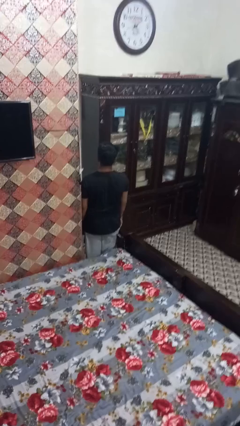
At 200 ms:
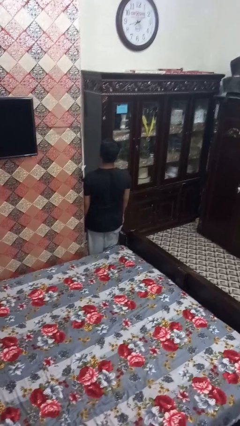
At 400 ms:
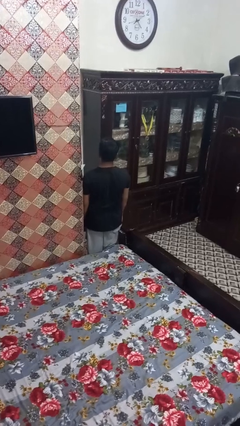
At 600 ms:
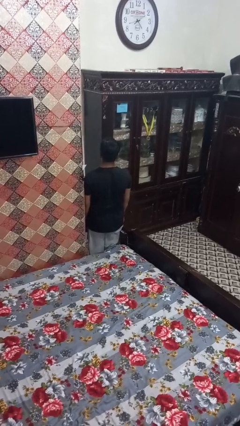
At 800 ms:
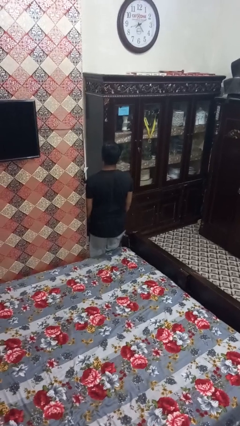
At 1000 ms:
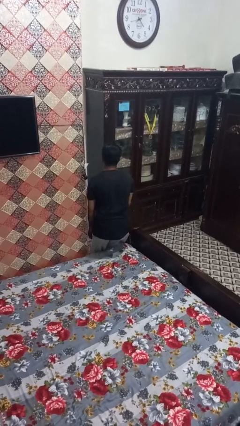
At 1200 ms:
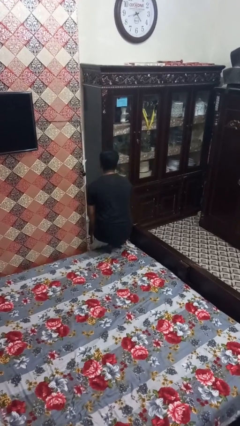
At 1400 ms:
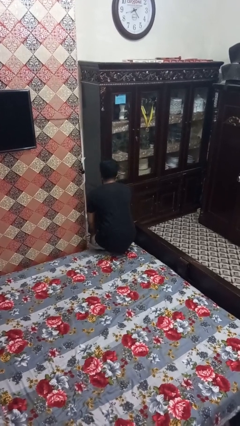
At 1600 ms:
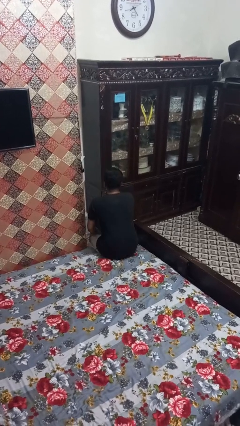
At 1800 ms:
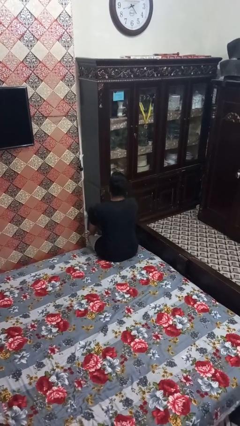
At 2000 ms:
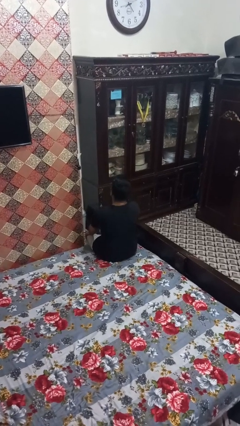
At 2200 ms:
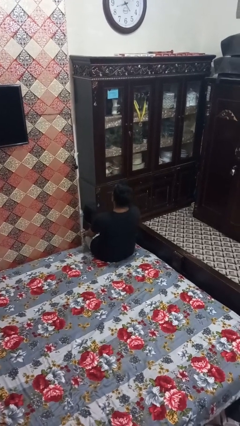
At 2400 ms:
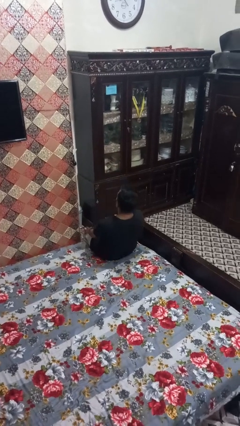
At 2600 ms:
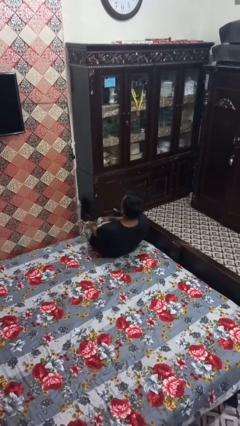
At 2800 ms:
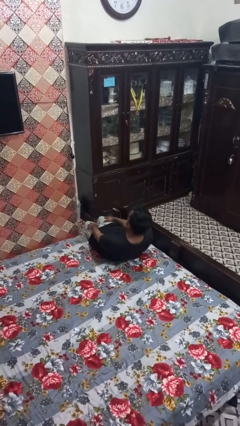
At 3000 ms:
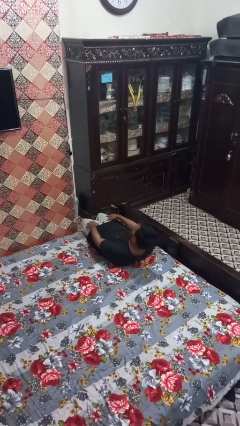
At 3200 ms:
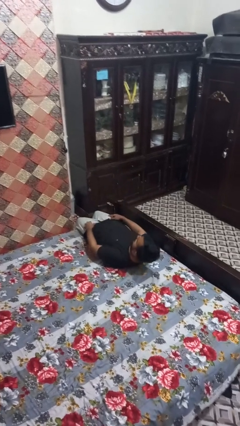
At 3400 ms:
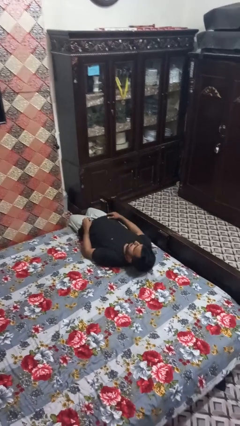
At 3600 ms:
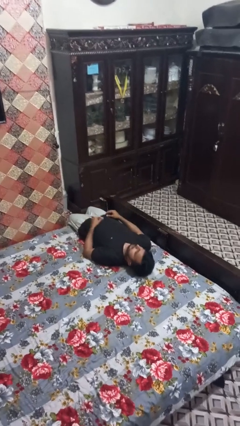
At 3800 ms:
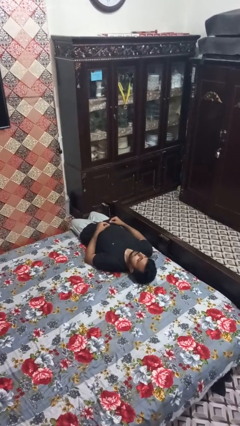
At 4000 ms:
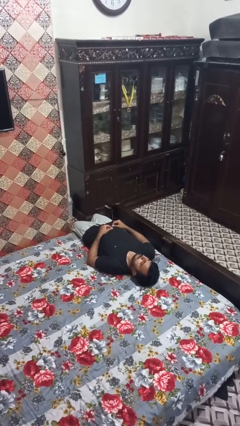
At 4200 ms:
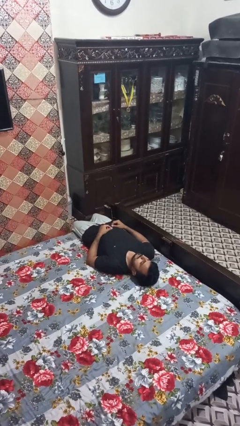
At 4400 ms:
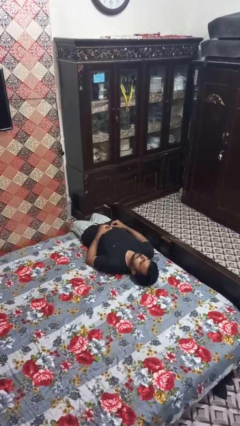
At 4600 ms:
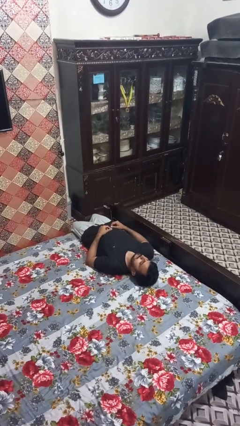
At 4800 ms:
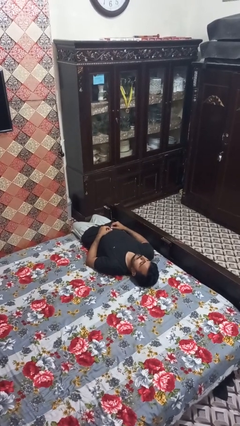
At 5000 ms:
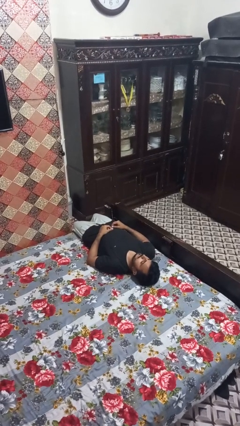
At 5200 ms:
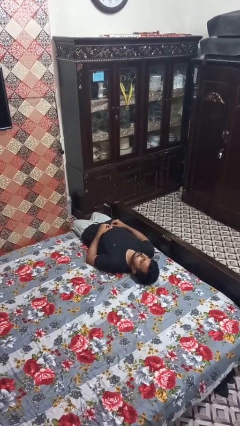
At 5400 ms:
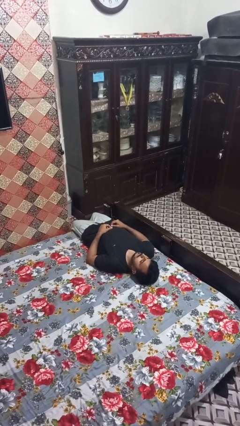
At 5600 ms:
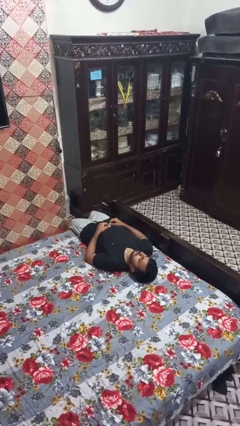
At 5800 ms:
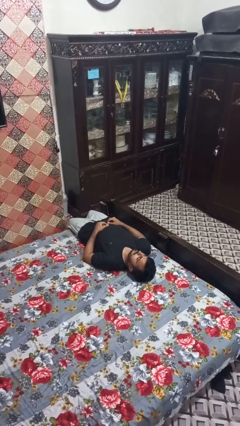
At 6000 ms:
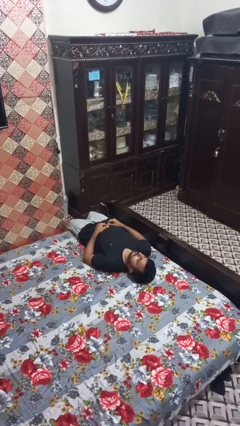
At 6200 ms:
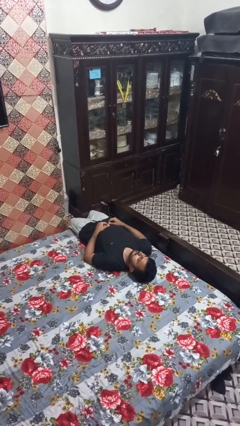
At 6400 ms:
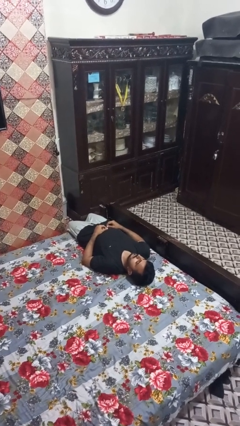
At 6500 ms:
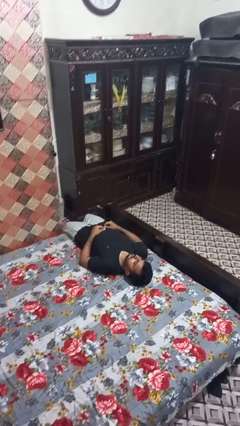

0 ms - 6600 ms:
person lies down on bed

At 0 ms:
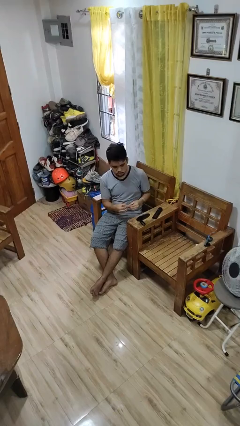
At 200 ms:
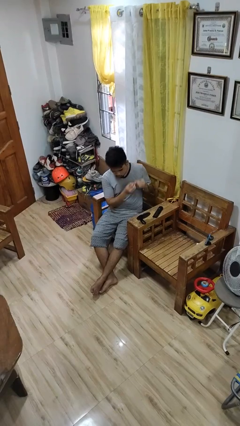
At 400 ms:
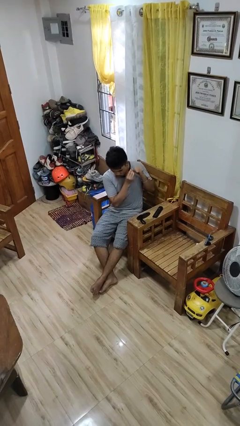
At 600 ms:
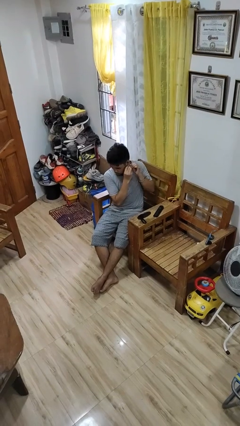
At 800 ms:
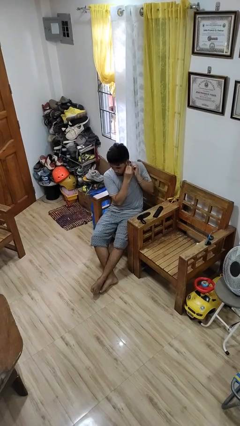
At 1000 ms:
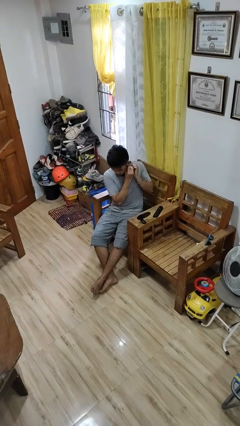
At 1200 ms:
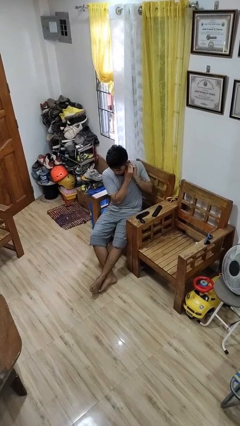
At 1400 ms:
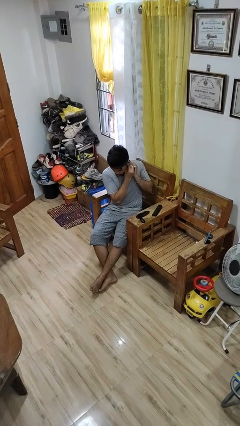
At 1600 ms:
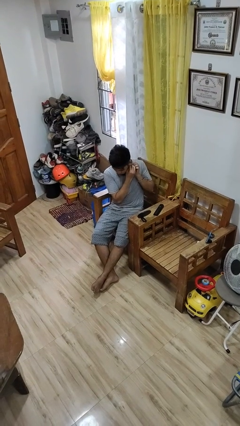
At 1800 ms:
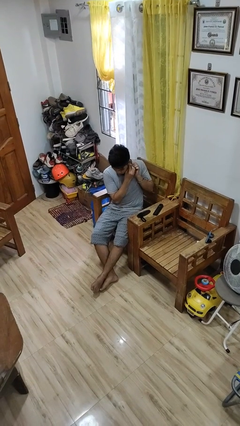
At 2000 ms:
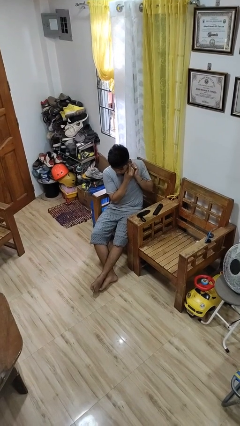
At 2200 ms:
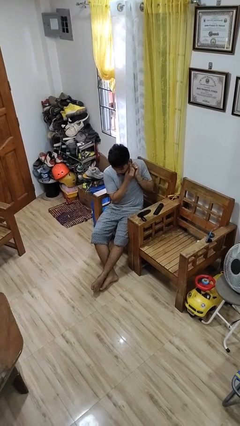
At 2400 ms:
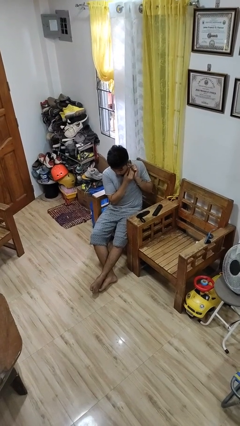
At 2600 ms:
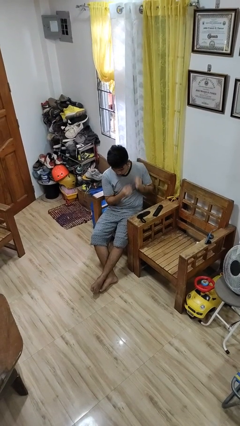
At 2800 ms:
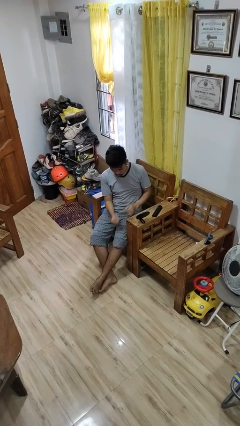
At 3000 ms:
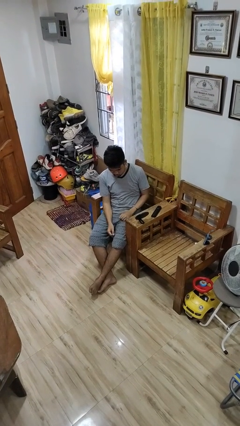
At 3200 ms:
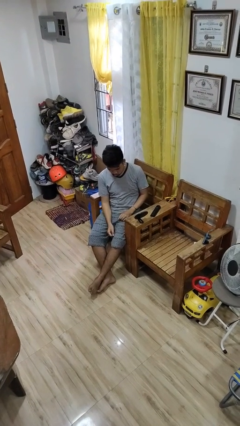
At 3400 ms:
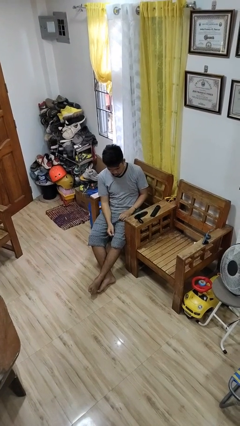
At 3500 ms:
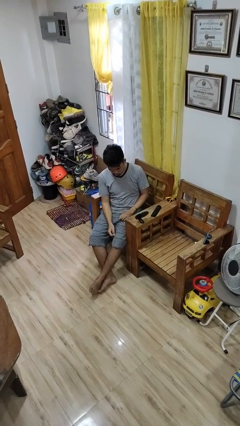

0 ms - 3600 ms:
person puts on earrings

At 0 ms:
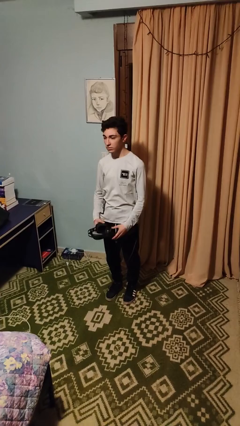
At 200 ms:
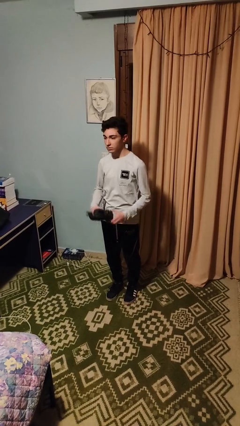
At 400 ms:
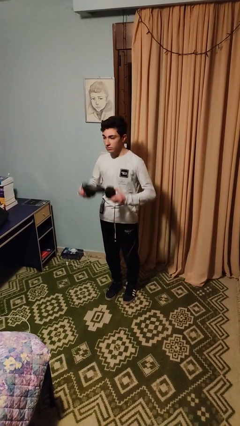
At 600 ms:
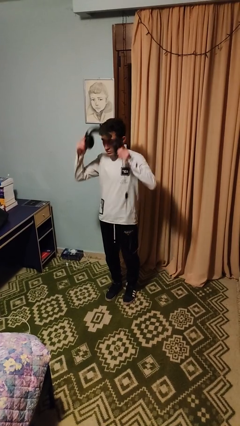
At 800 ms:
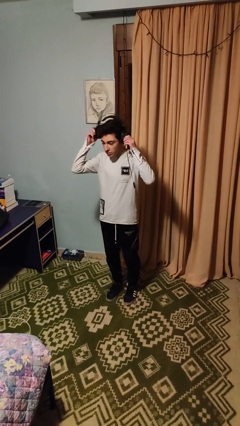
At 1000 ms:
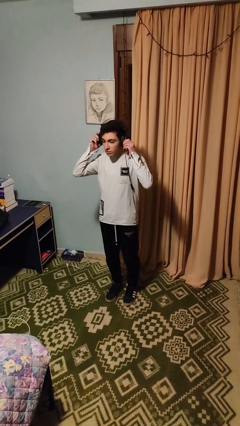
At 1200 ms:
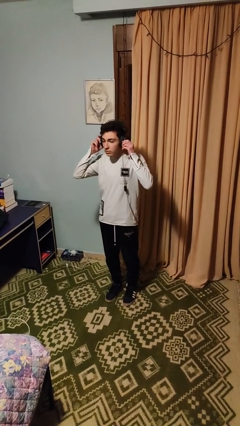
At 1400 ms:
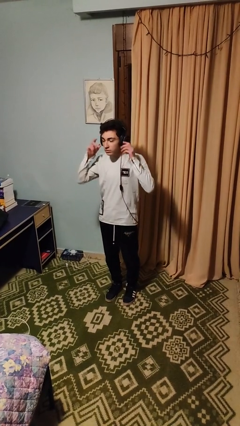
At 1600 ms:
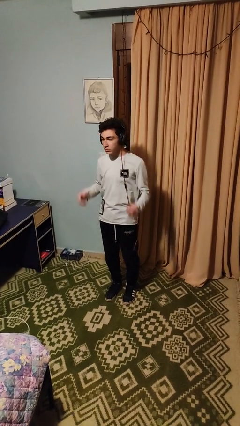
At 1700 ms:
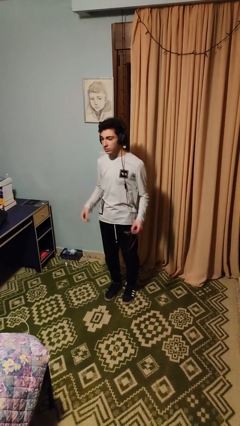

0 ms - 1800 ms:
person puts on headphones

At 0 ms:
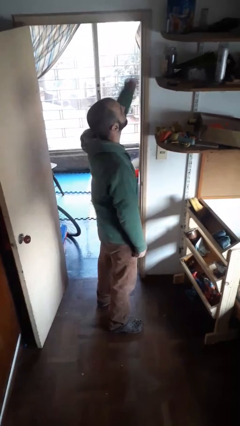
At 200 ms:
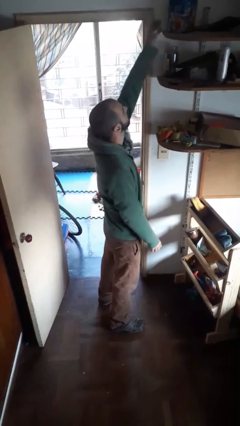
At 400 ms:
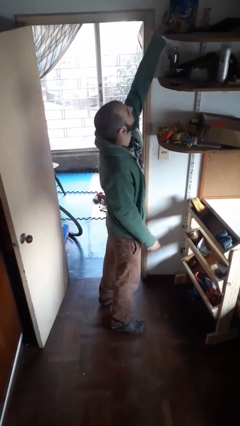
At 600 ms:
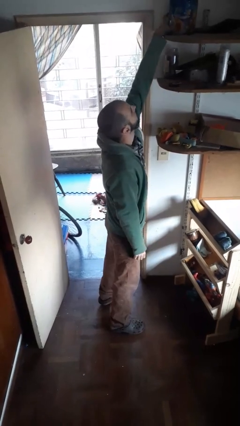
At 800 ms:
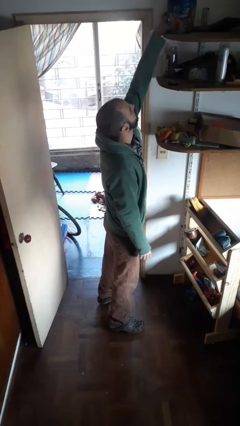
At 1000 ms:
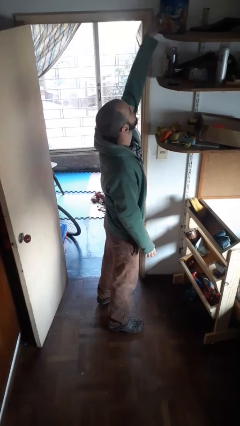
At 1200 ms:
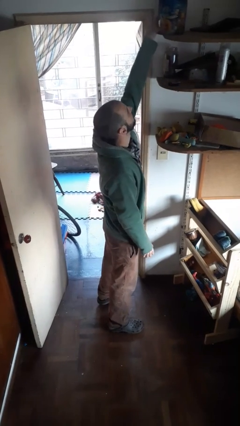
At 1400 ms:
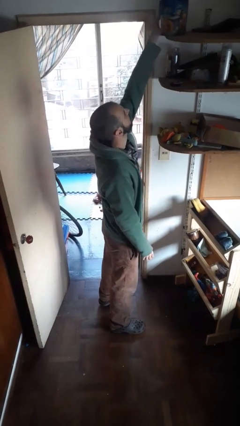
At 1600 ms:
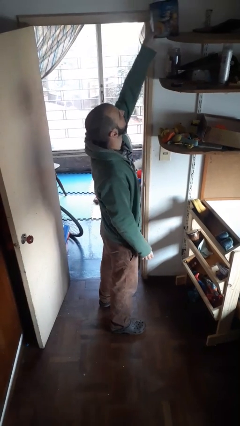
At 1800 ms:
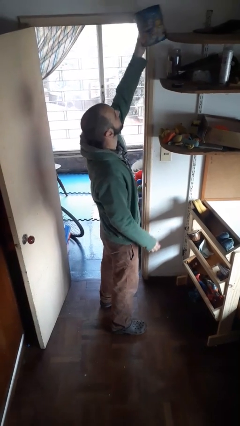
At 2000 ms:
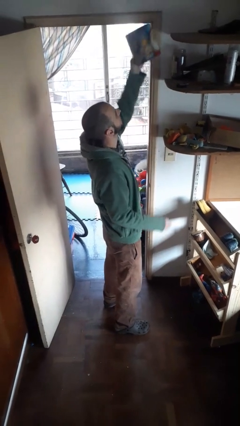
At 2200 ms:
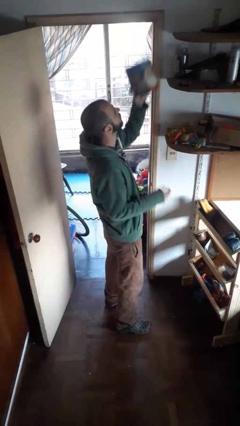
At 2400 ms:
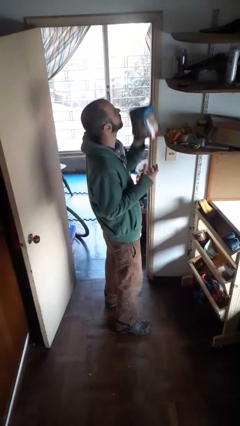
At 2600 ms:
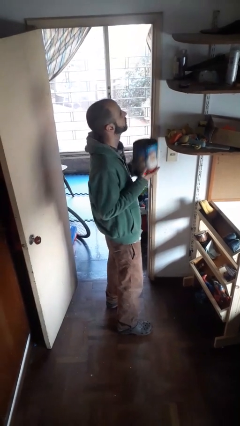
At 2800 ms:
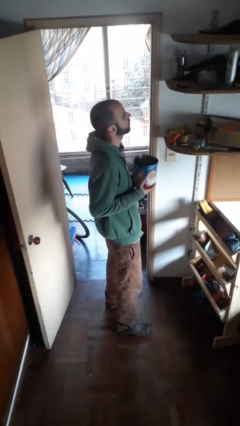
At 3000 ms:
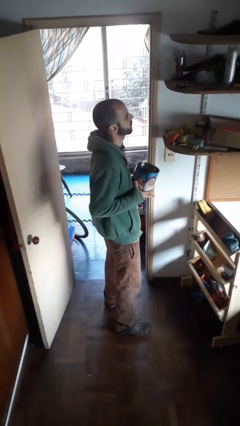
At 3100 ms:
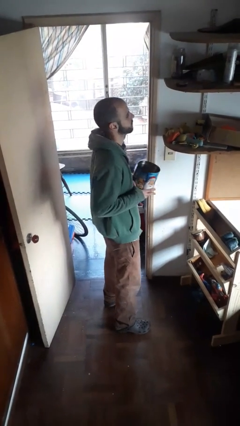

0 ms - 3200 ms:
person picks up object from shelf

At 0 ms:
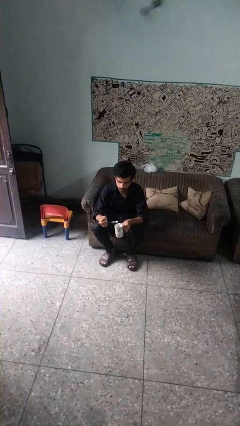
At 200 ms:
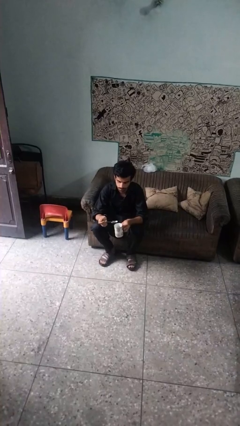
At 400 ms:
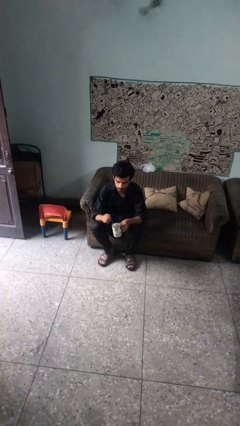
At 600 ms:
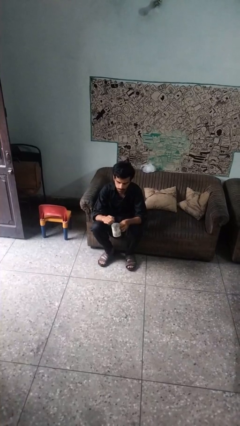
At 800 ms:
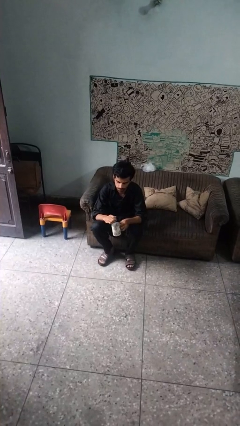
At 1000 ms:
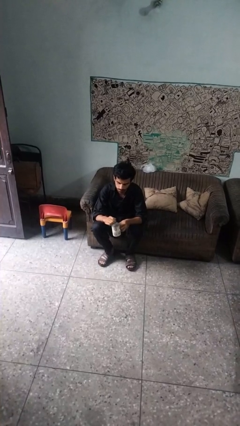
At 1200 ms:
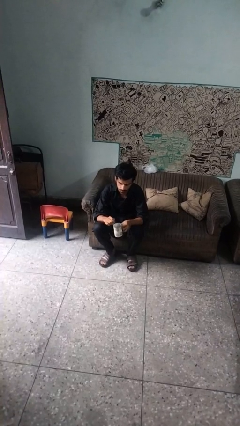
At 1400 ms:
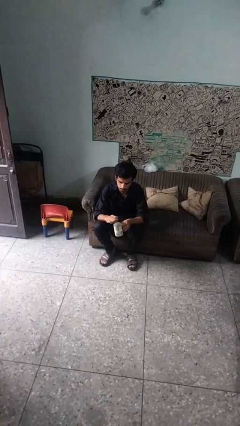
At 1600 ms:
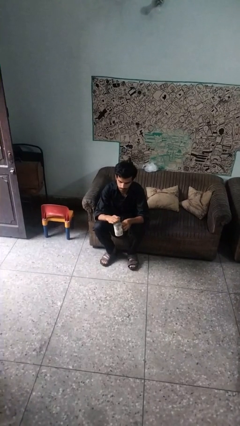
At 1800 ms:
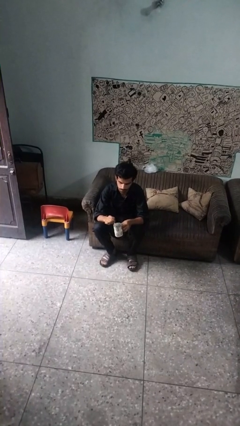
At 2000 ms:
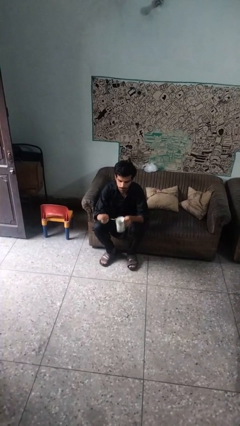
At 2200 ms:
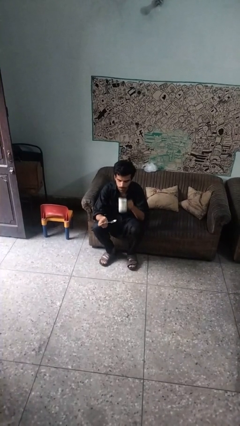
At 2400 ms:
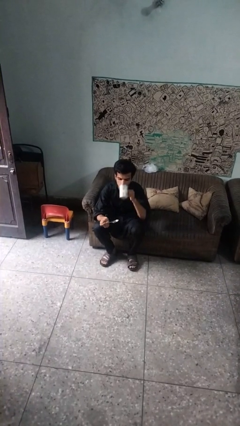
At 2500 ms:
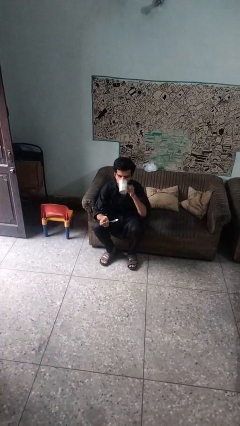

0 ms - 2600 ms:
person stirs mug
